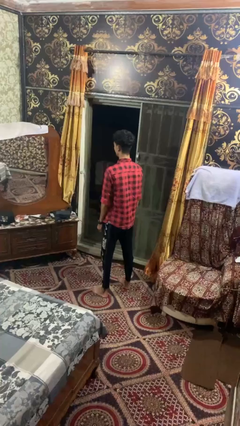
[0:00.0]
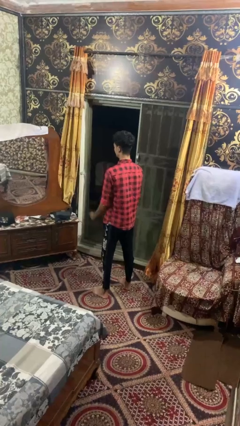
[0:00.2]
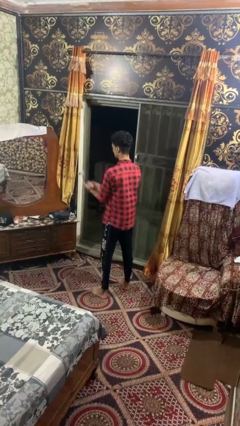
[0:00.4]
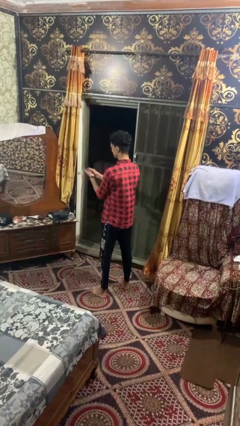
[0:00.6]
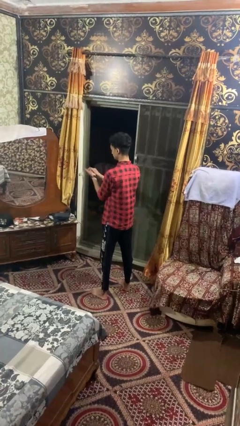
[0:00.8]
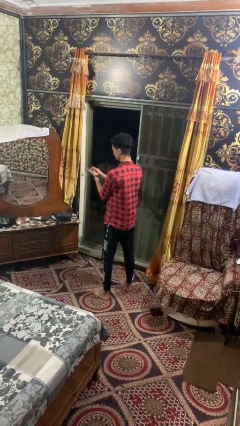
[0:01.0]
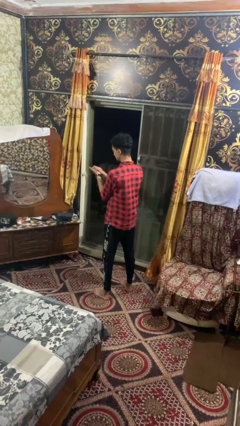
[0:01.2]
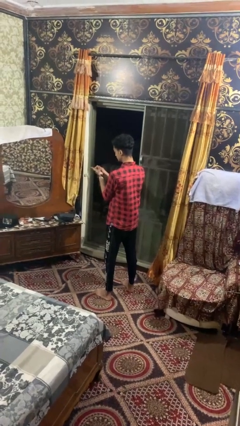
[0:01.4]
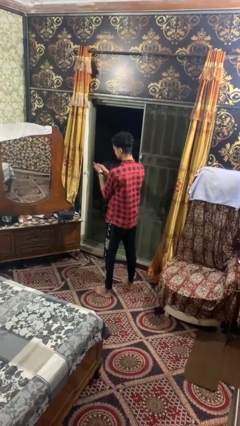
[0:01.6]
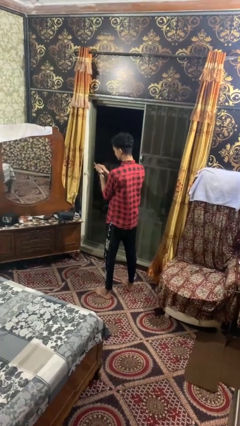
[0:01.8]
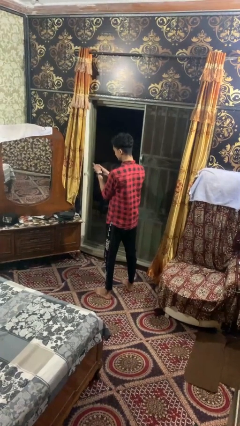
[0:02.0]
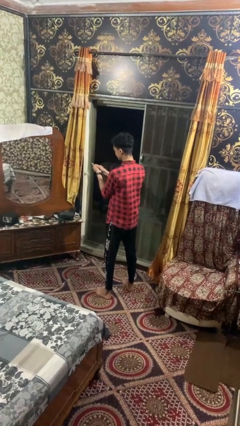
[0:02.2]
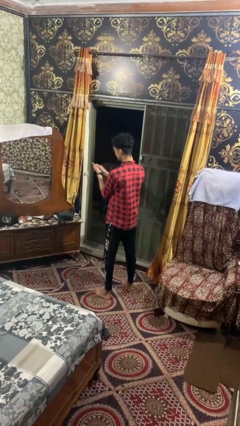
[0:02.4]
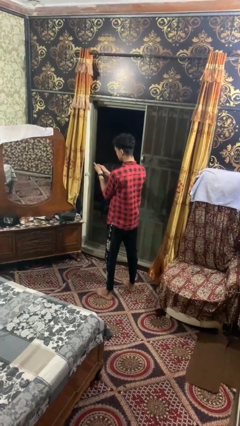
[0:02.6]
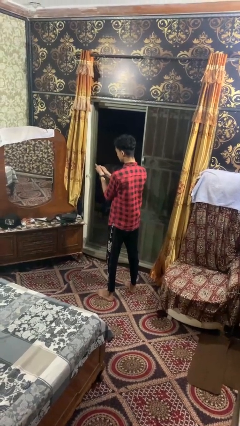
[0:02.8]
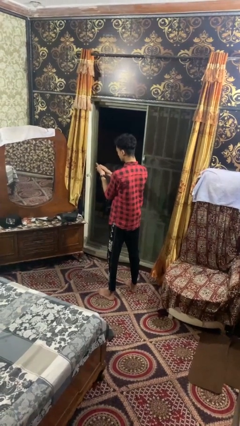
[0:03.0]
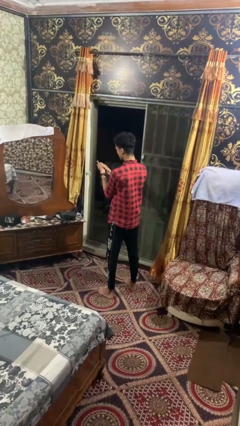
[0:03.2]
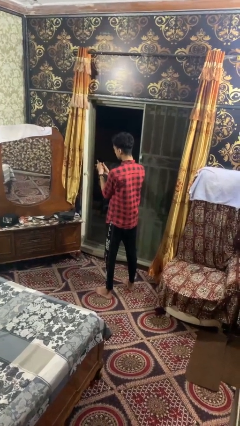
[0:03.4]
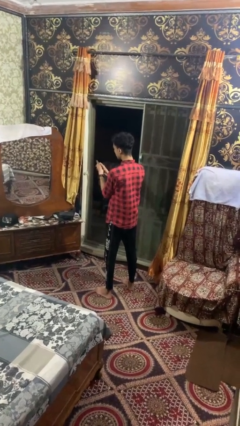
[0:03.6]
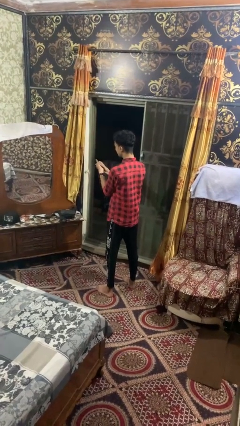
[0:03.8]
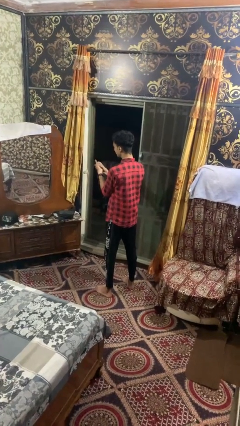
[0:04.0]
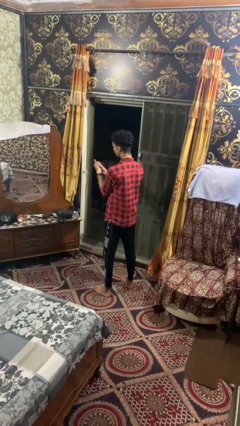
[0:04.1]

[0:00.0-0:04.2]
person cracks knuckles

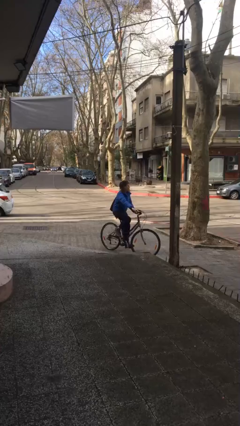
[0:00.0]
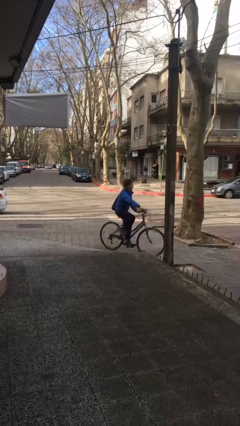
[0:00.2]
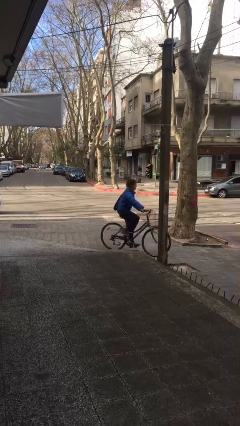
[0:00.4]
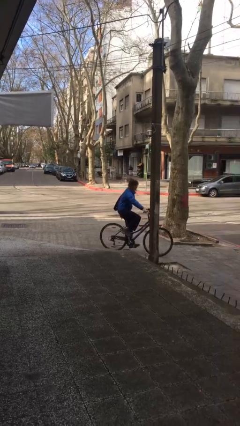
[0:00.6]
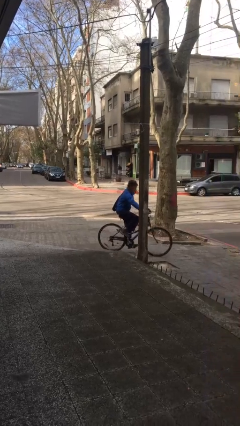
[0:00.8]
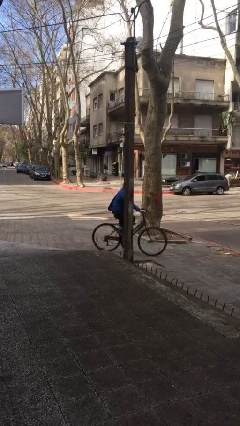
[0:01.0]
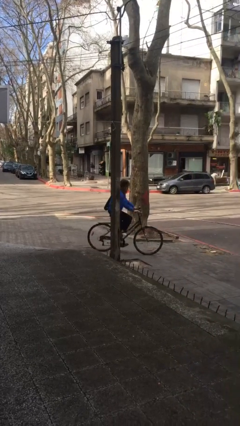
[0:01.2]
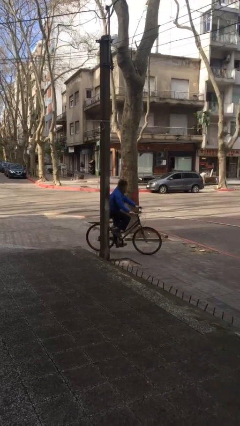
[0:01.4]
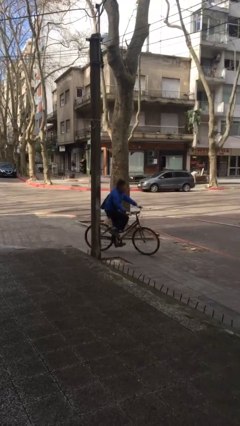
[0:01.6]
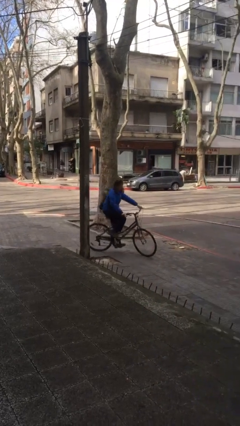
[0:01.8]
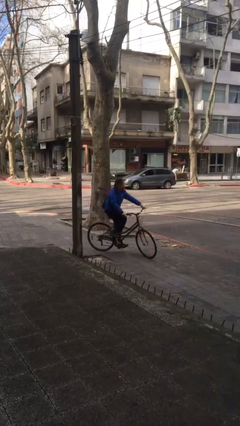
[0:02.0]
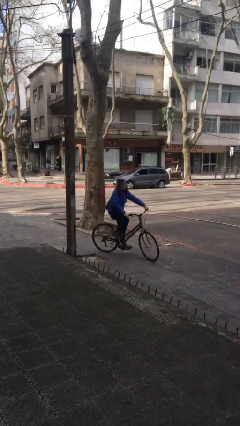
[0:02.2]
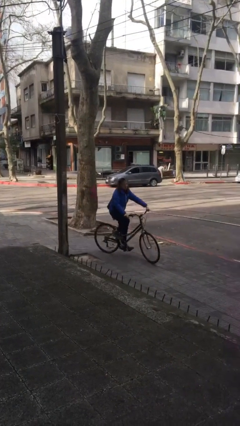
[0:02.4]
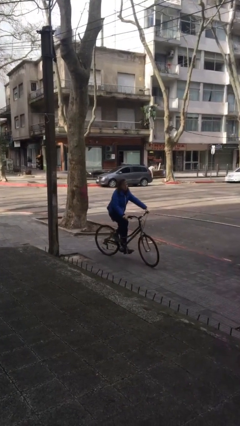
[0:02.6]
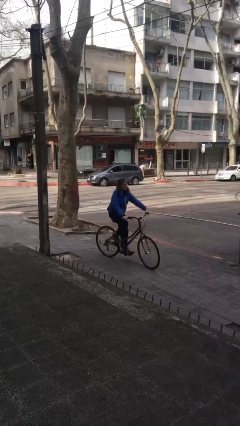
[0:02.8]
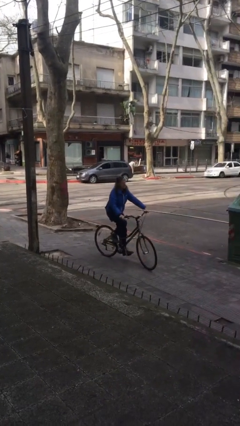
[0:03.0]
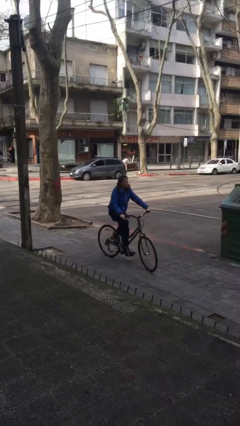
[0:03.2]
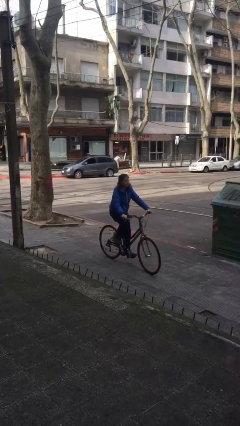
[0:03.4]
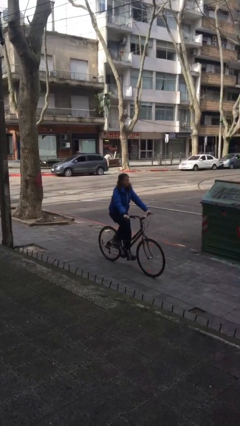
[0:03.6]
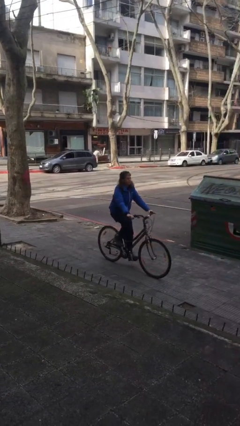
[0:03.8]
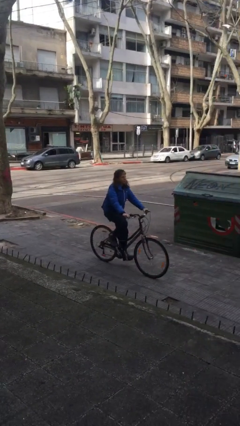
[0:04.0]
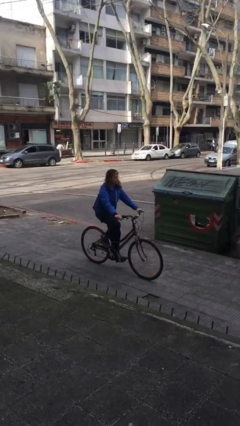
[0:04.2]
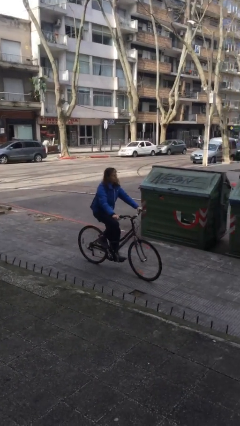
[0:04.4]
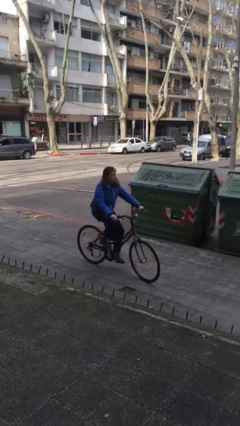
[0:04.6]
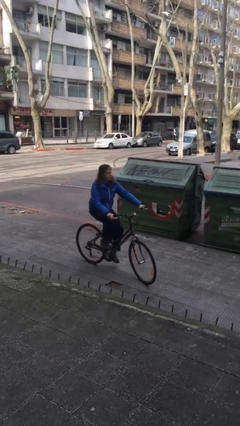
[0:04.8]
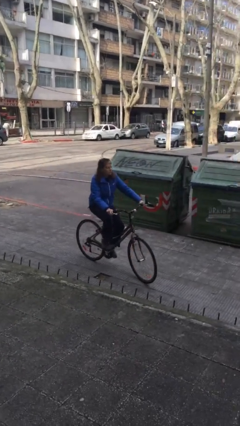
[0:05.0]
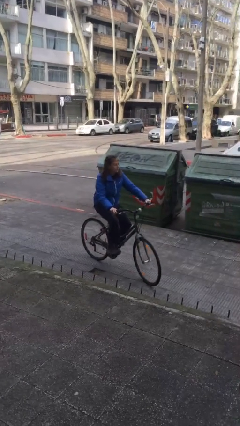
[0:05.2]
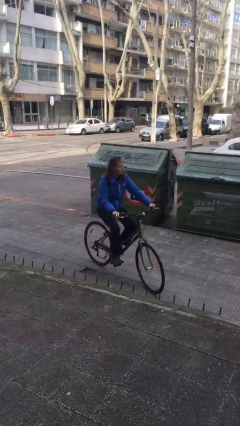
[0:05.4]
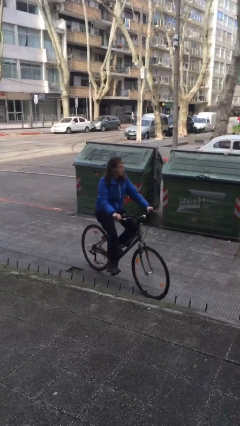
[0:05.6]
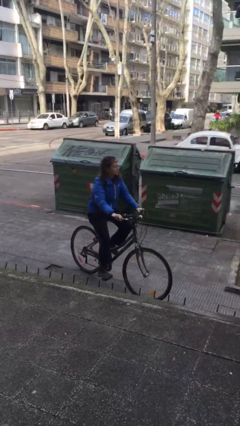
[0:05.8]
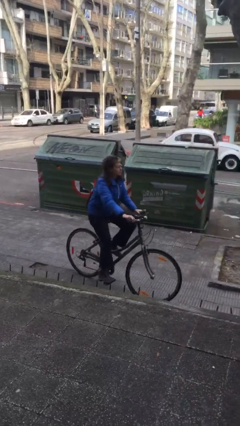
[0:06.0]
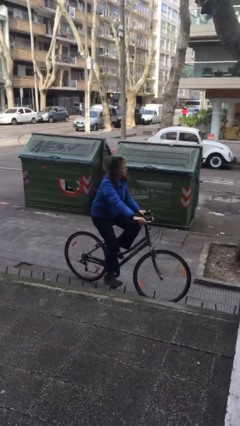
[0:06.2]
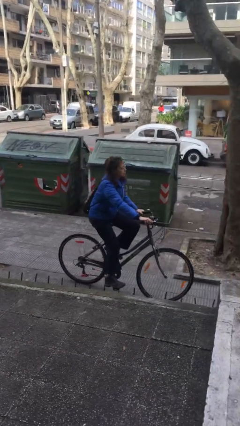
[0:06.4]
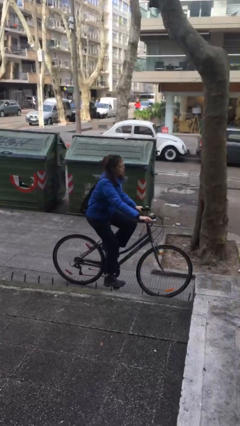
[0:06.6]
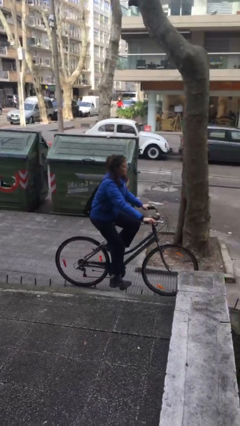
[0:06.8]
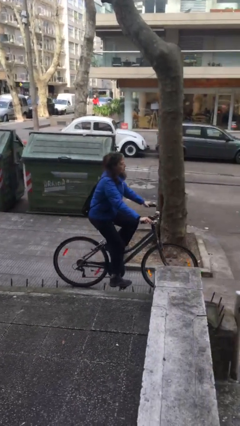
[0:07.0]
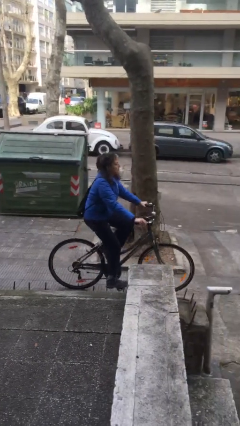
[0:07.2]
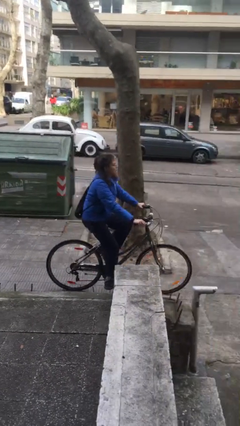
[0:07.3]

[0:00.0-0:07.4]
person rides bicycle

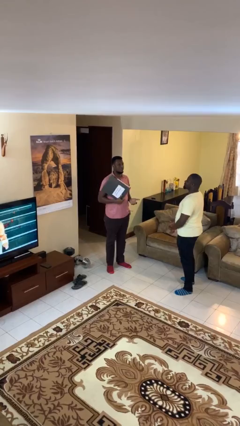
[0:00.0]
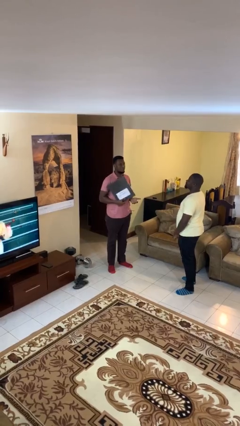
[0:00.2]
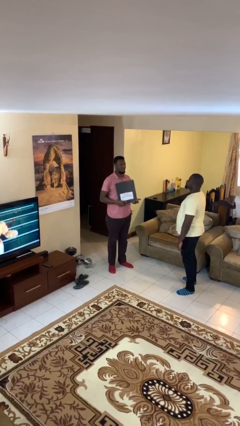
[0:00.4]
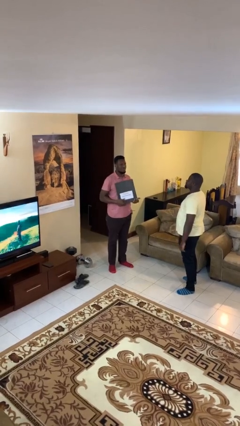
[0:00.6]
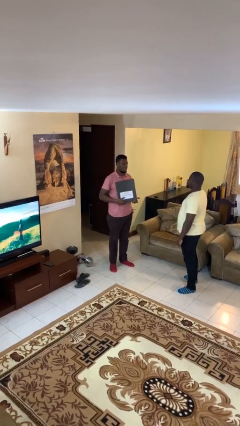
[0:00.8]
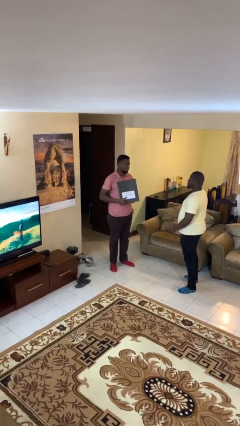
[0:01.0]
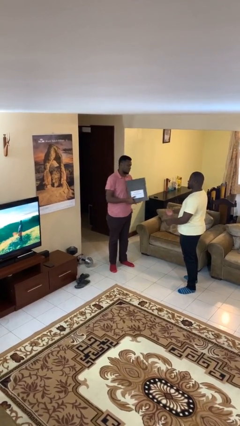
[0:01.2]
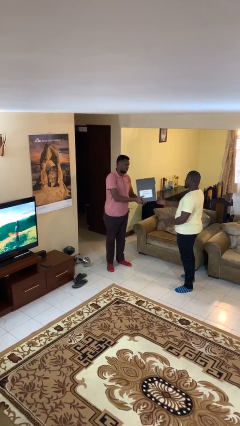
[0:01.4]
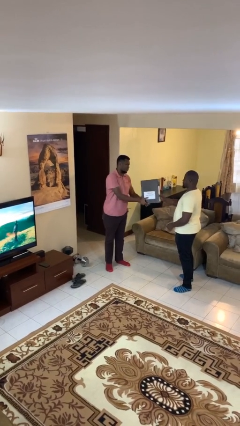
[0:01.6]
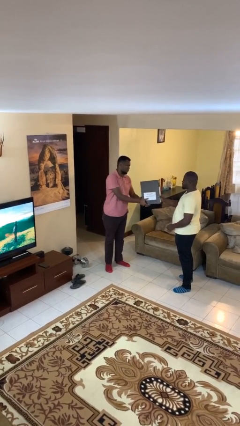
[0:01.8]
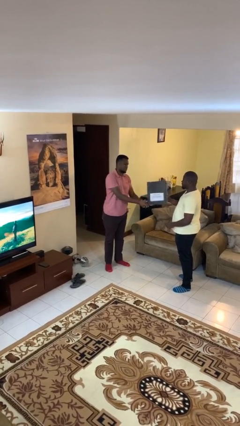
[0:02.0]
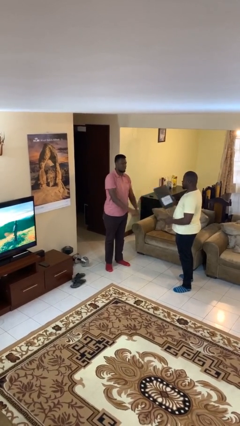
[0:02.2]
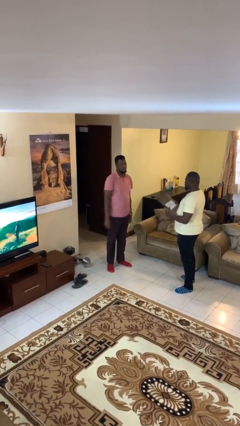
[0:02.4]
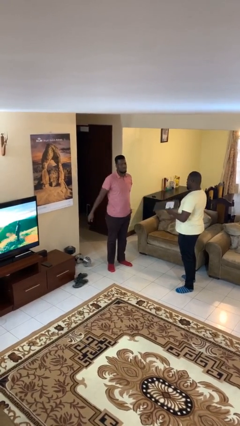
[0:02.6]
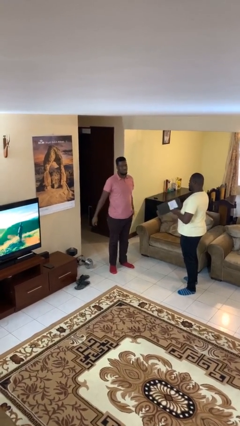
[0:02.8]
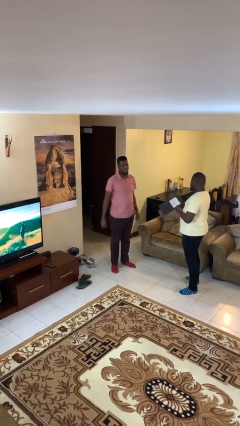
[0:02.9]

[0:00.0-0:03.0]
person transfers object to person

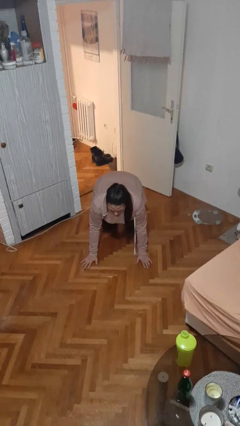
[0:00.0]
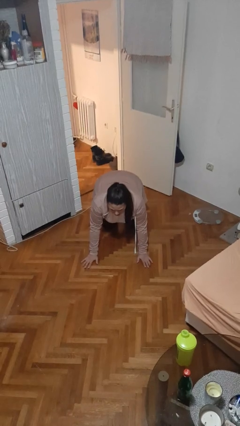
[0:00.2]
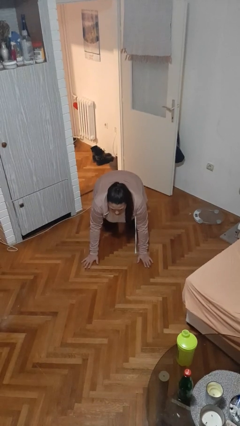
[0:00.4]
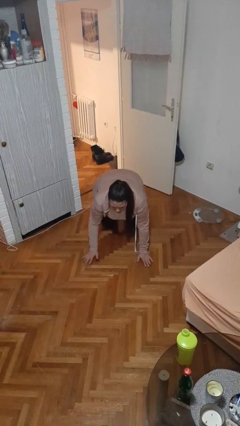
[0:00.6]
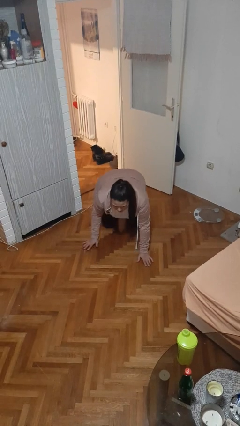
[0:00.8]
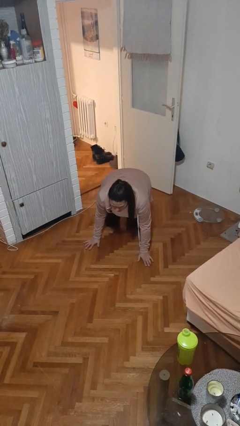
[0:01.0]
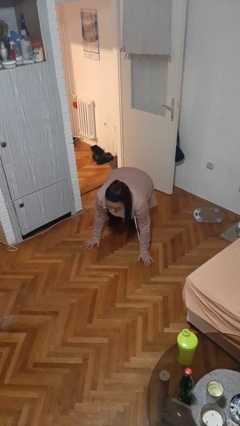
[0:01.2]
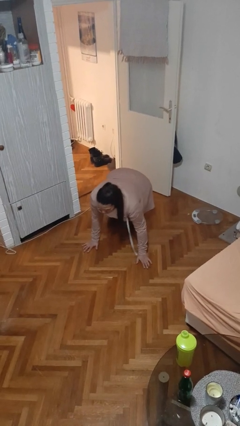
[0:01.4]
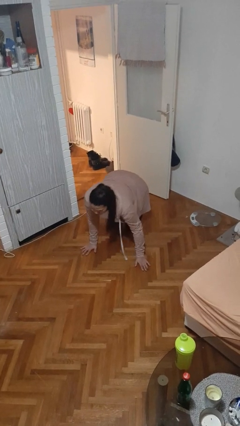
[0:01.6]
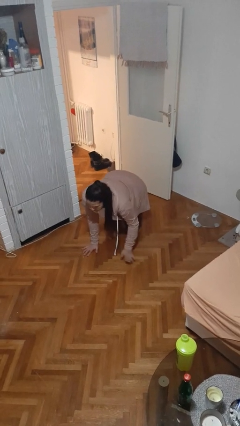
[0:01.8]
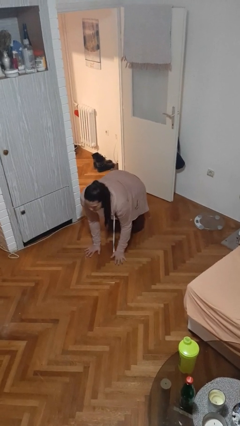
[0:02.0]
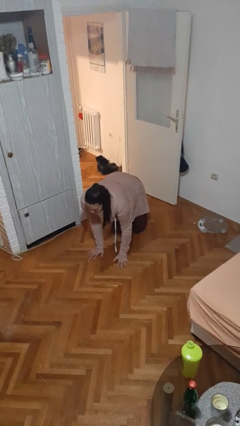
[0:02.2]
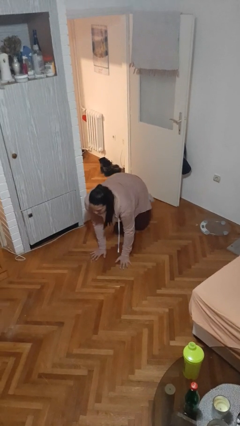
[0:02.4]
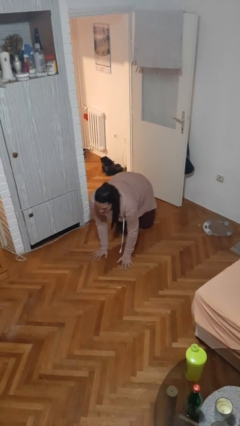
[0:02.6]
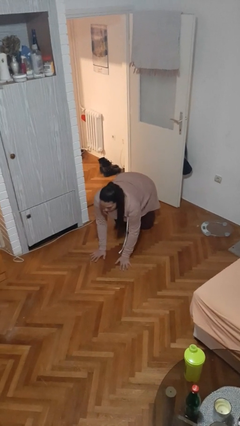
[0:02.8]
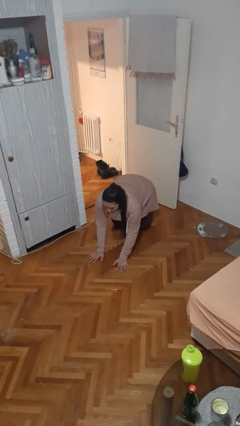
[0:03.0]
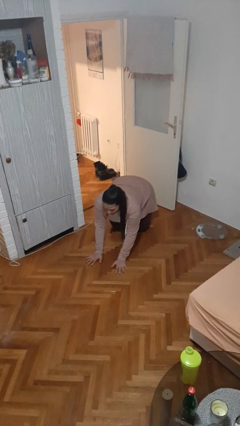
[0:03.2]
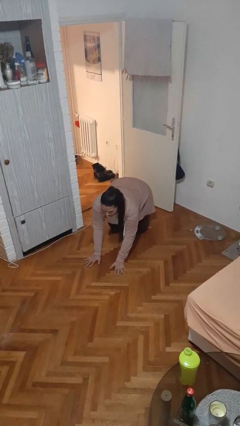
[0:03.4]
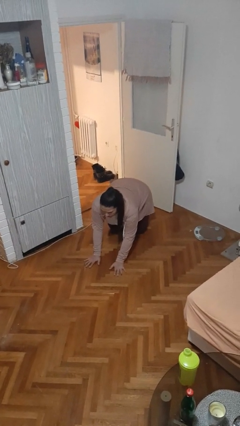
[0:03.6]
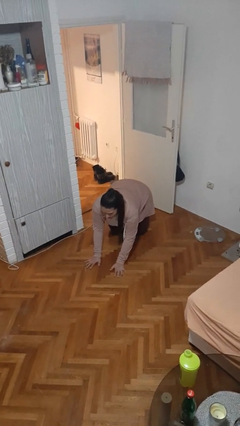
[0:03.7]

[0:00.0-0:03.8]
person crawls
